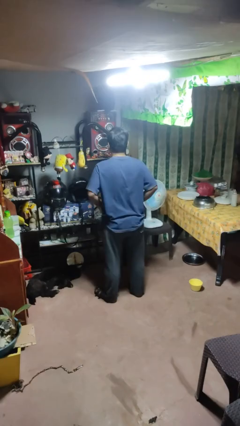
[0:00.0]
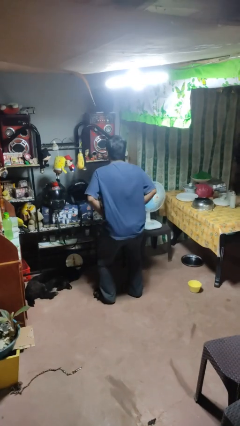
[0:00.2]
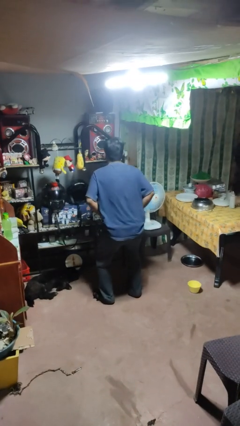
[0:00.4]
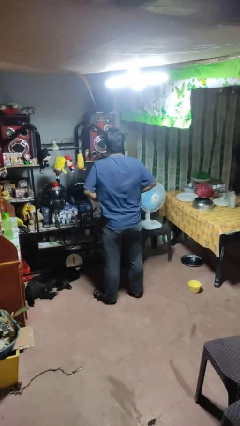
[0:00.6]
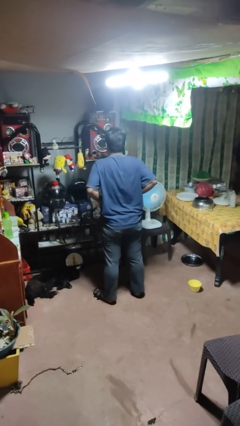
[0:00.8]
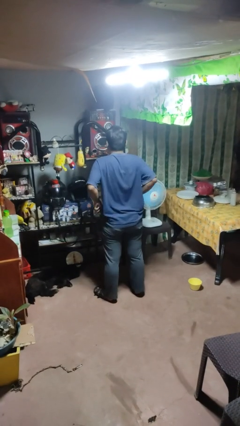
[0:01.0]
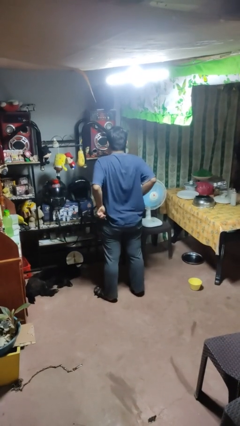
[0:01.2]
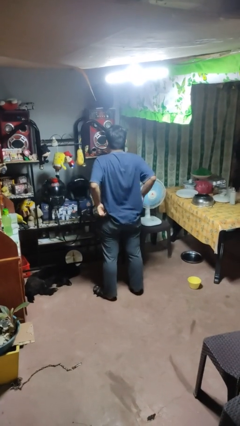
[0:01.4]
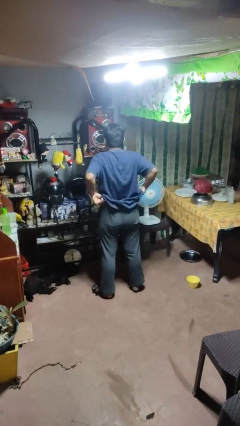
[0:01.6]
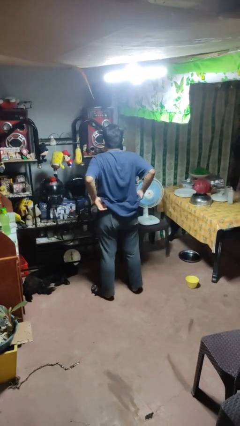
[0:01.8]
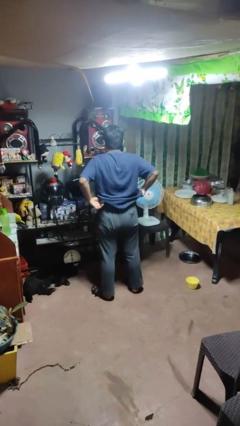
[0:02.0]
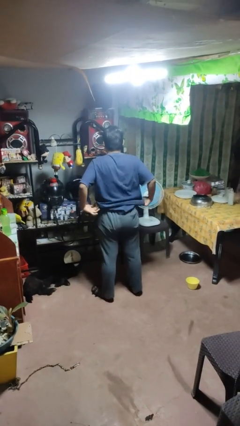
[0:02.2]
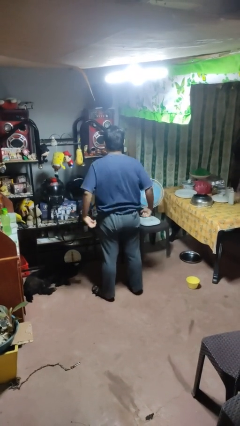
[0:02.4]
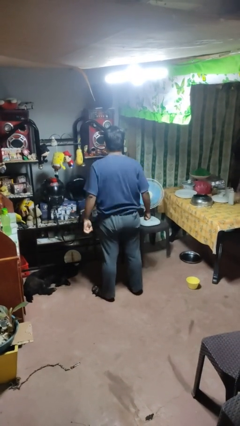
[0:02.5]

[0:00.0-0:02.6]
person hikes up pants

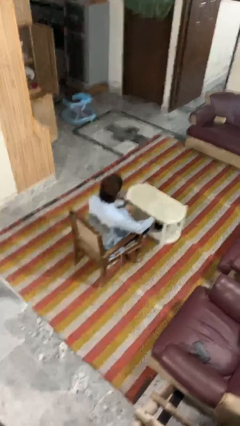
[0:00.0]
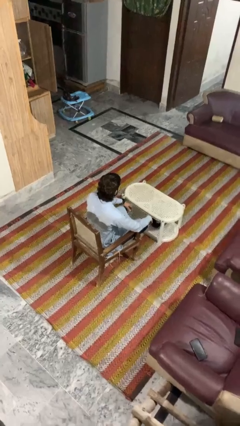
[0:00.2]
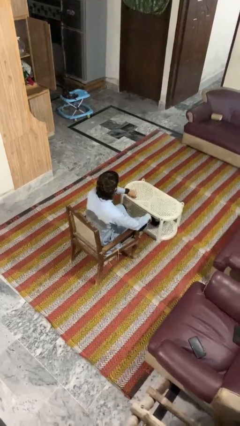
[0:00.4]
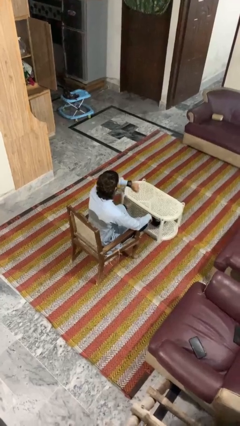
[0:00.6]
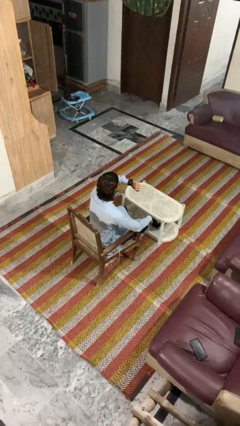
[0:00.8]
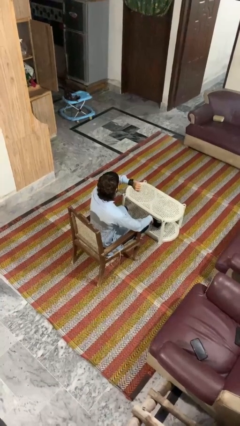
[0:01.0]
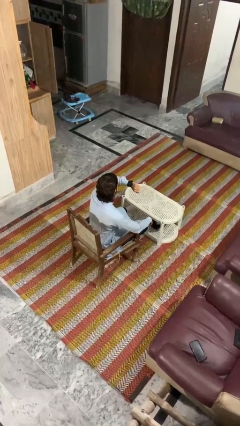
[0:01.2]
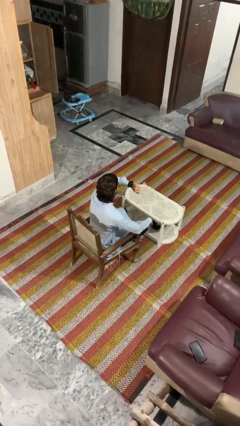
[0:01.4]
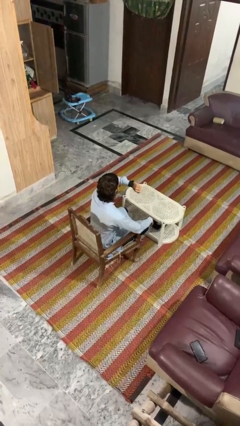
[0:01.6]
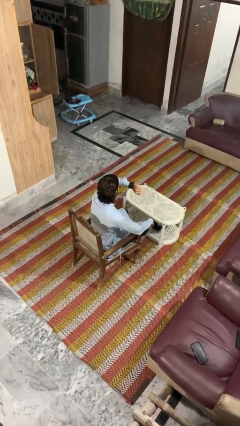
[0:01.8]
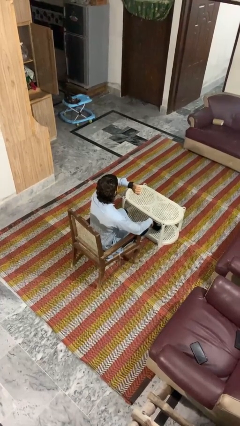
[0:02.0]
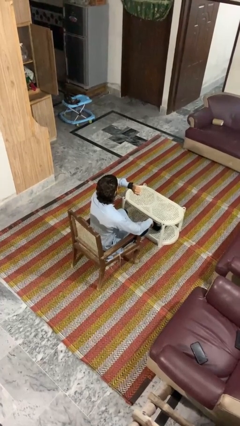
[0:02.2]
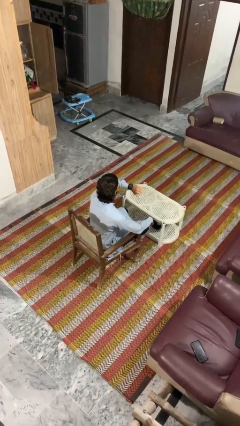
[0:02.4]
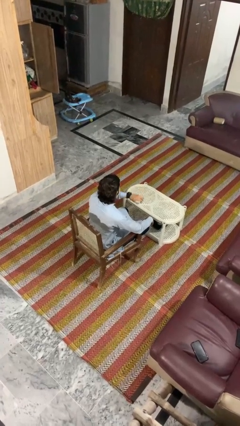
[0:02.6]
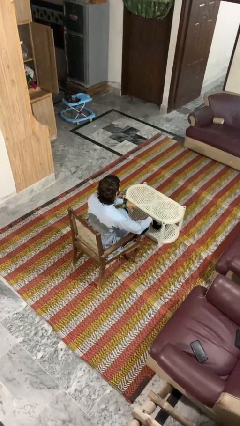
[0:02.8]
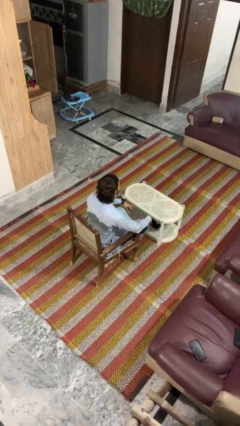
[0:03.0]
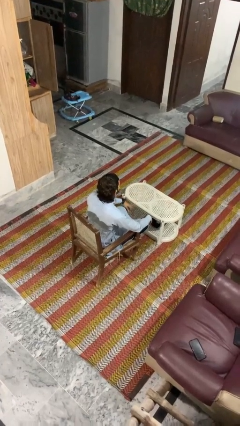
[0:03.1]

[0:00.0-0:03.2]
person looks at wristwatch

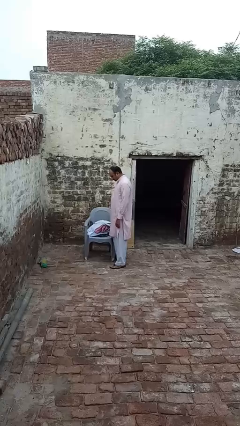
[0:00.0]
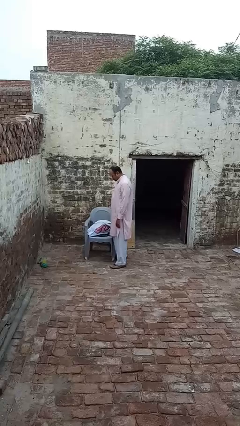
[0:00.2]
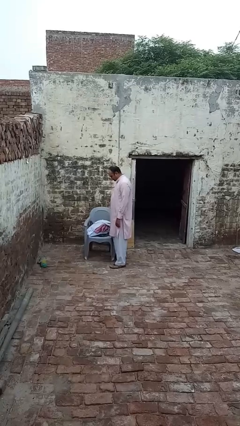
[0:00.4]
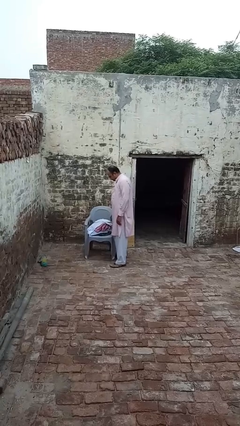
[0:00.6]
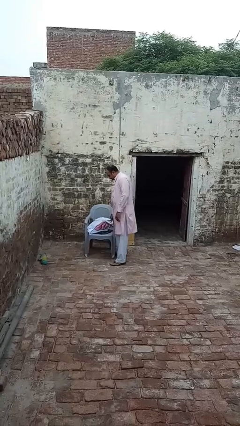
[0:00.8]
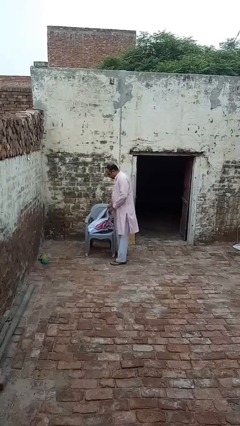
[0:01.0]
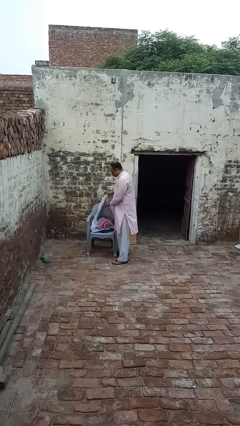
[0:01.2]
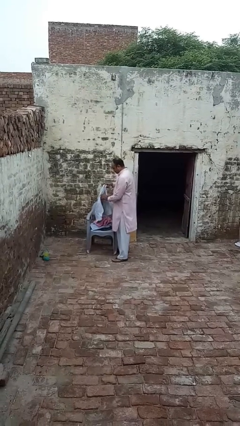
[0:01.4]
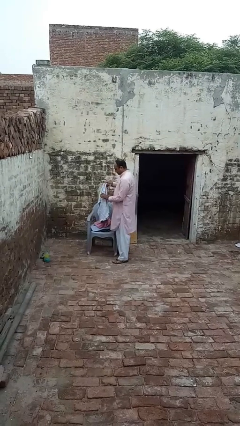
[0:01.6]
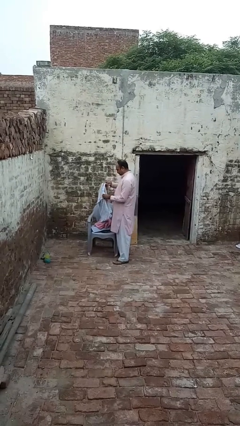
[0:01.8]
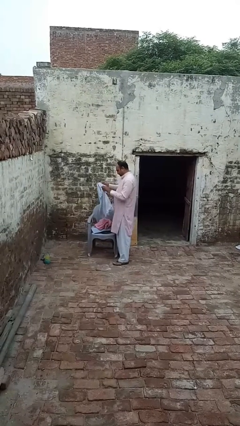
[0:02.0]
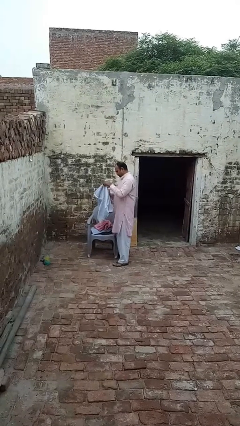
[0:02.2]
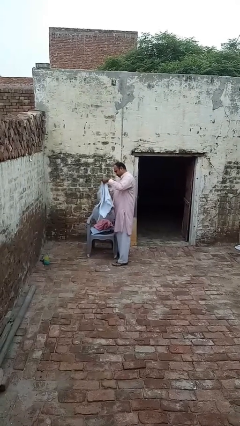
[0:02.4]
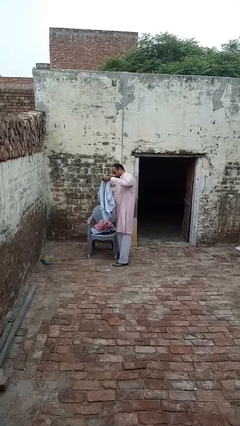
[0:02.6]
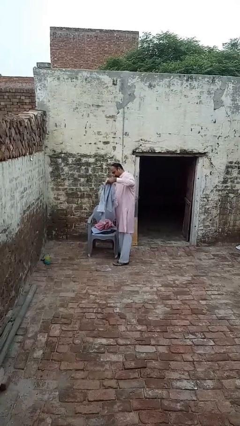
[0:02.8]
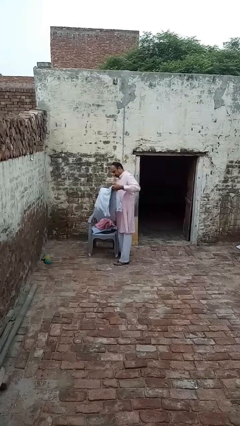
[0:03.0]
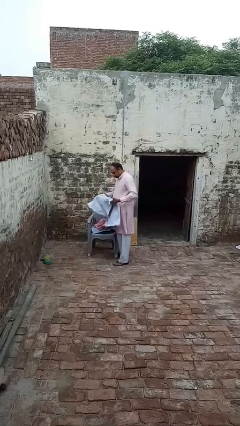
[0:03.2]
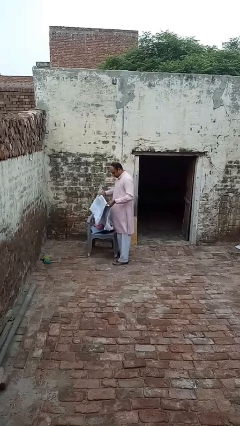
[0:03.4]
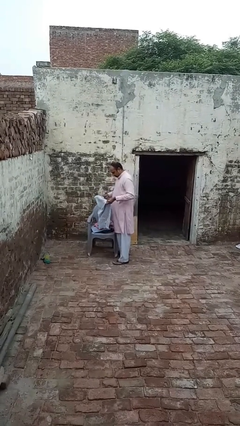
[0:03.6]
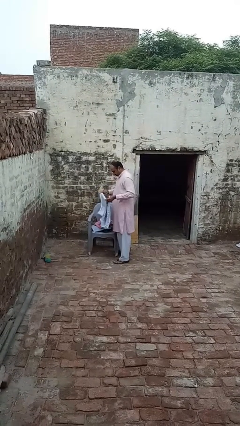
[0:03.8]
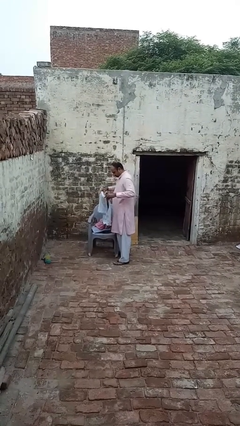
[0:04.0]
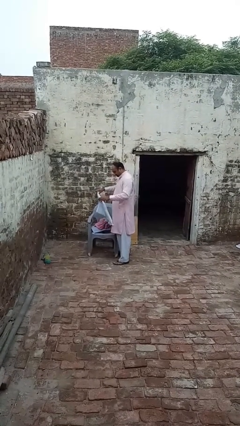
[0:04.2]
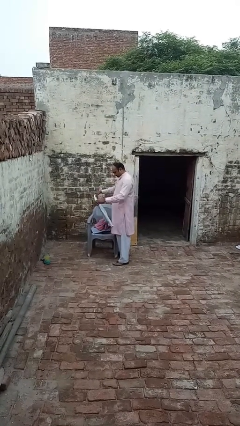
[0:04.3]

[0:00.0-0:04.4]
person folds towel

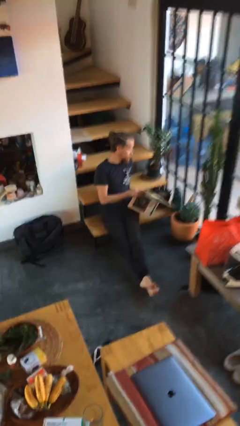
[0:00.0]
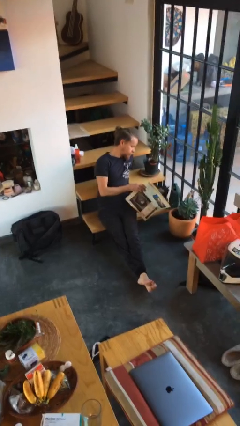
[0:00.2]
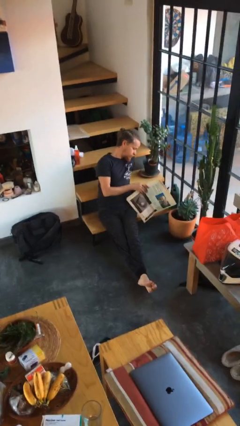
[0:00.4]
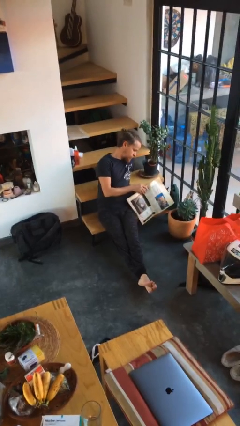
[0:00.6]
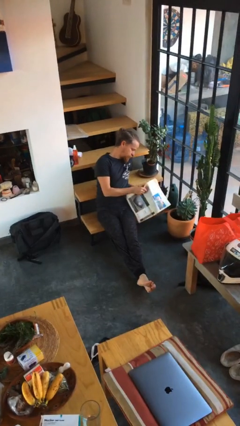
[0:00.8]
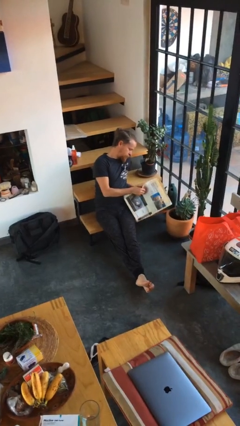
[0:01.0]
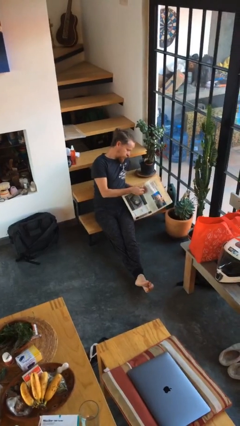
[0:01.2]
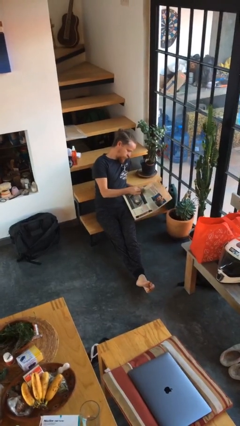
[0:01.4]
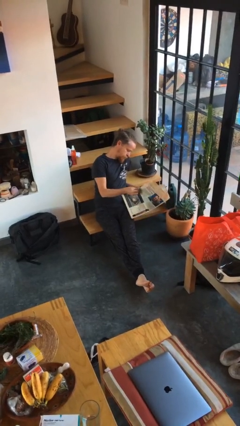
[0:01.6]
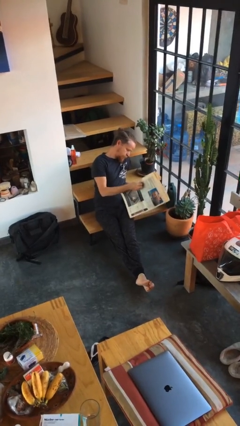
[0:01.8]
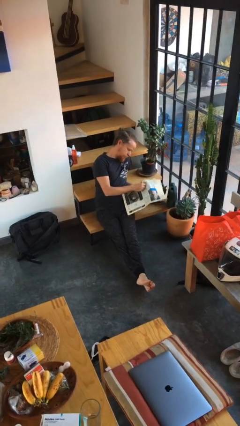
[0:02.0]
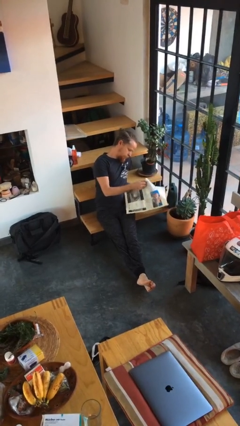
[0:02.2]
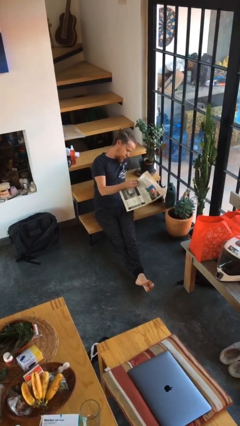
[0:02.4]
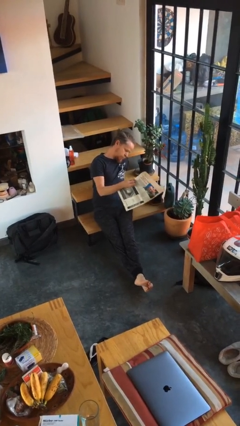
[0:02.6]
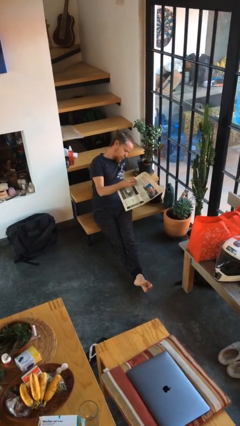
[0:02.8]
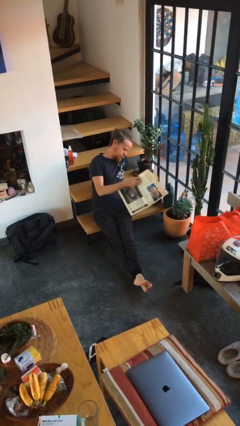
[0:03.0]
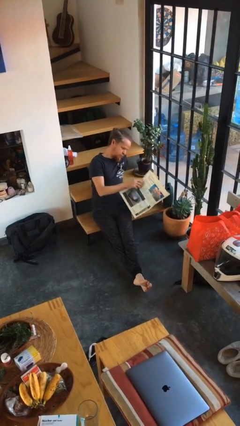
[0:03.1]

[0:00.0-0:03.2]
person reads newspaper

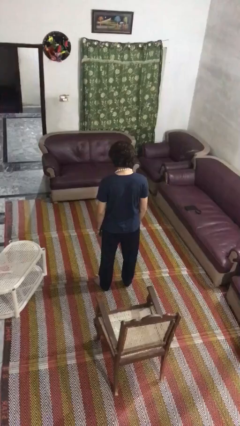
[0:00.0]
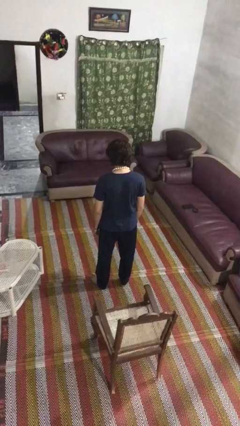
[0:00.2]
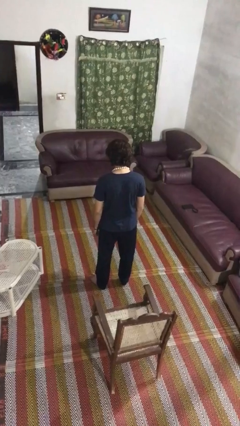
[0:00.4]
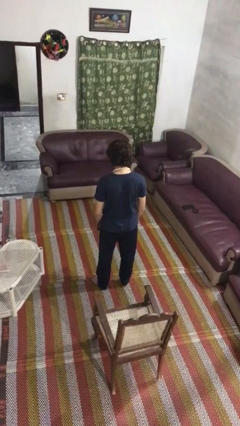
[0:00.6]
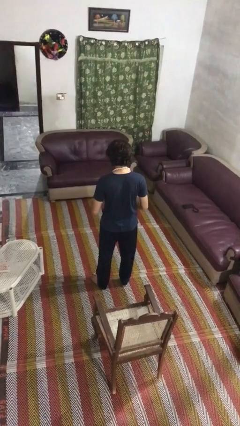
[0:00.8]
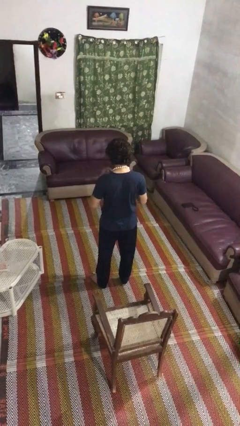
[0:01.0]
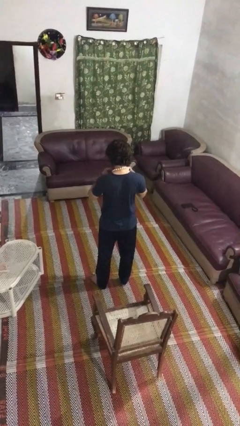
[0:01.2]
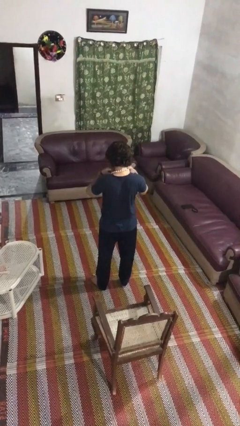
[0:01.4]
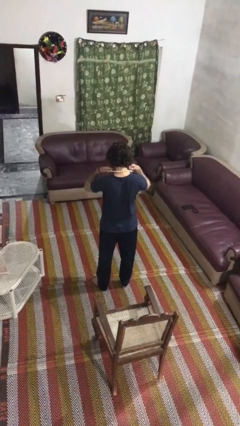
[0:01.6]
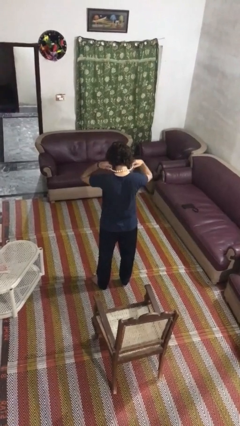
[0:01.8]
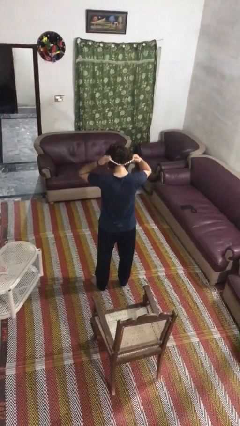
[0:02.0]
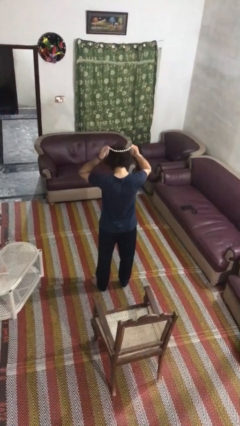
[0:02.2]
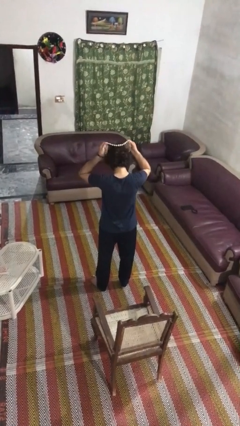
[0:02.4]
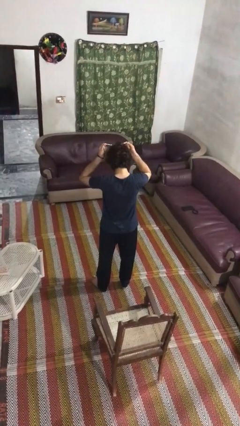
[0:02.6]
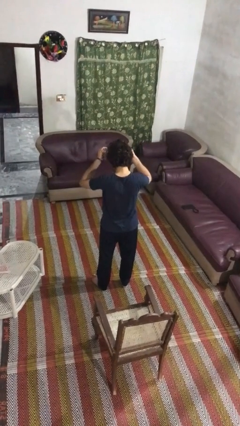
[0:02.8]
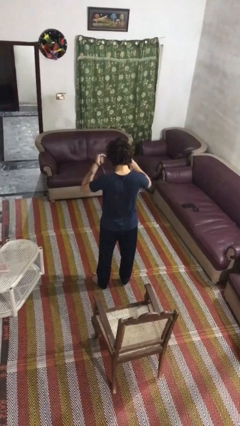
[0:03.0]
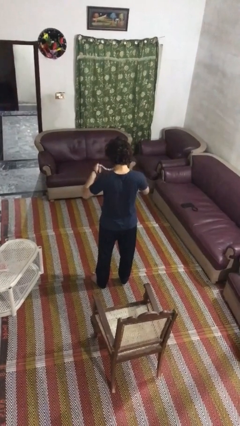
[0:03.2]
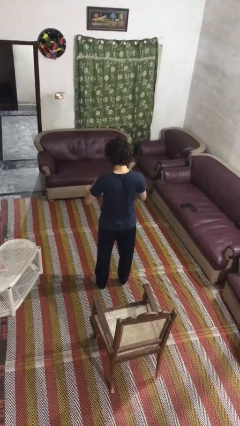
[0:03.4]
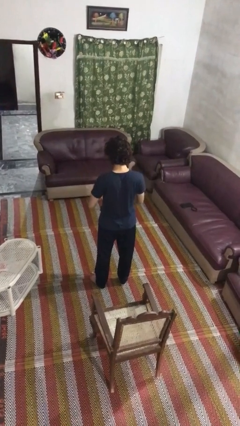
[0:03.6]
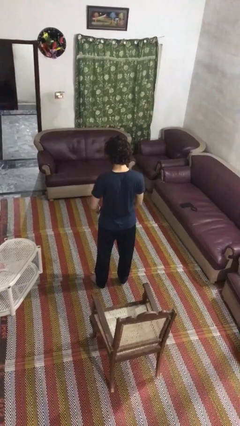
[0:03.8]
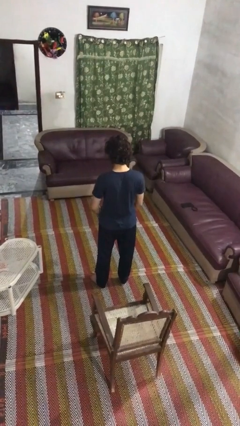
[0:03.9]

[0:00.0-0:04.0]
person takes off necklace
